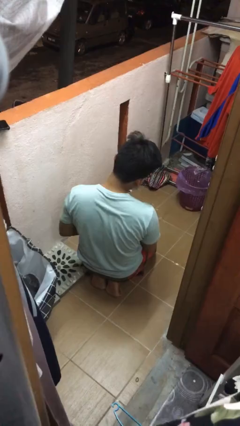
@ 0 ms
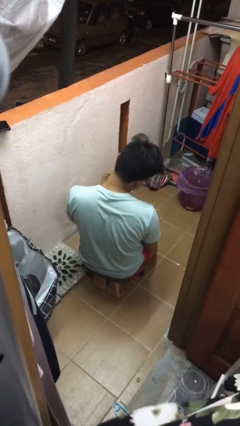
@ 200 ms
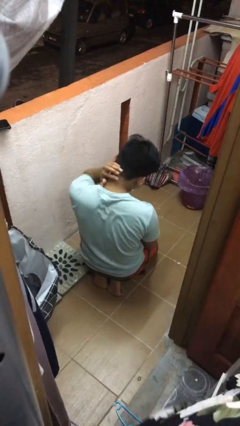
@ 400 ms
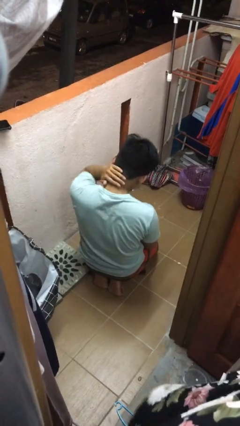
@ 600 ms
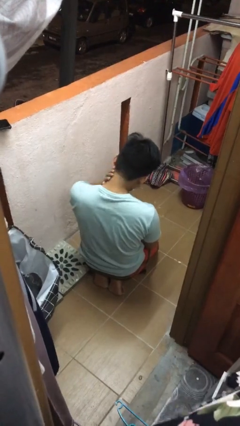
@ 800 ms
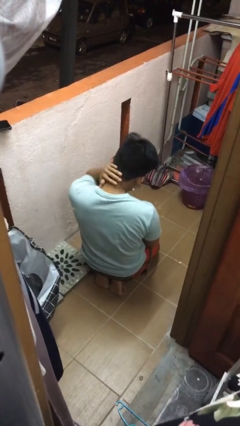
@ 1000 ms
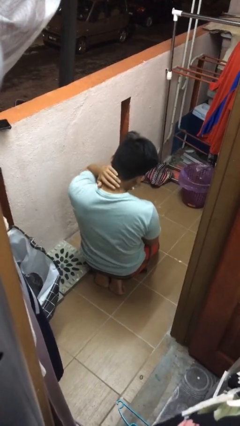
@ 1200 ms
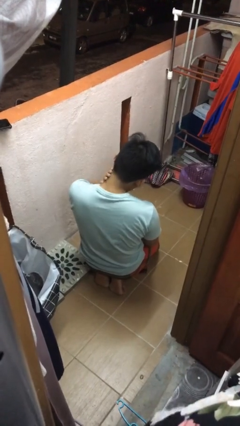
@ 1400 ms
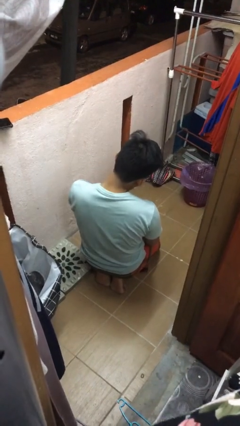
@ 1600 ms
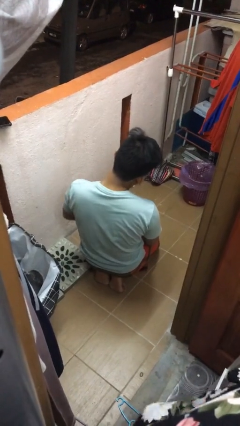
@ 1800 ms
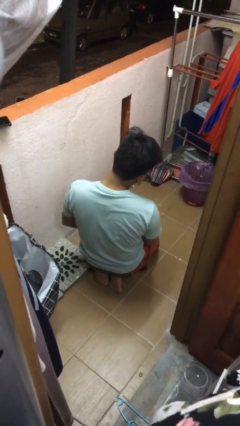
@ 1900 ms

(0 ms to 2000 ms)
person rubs neck

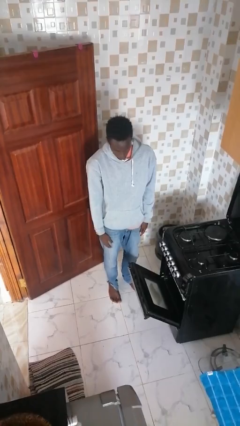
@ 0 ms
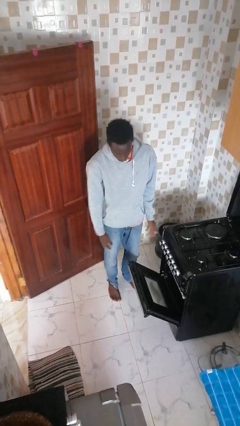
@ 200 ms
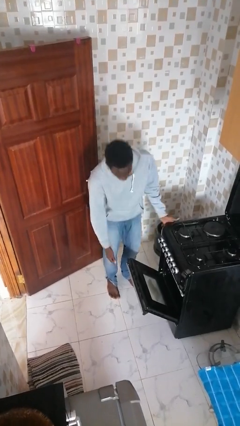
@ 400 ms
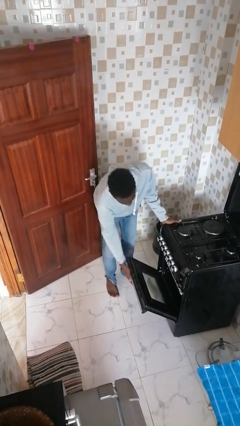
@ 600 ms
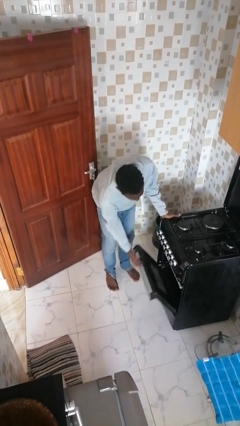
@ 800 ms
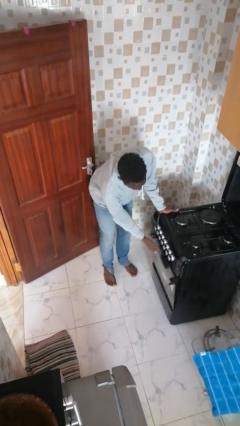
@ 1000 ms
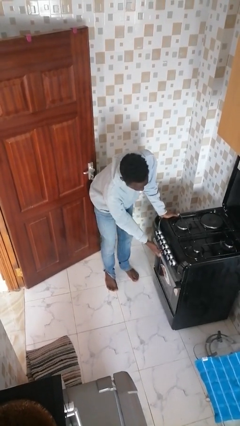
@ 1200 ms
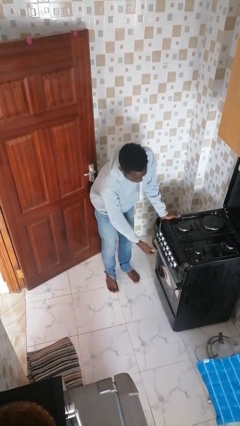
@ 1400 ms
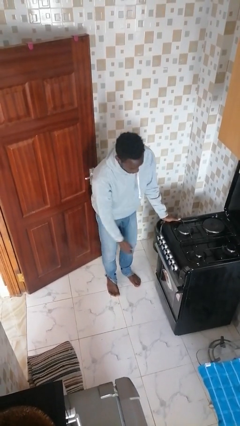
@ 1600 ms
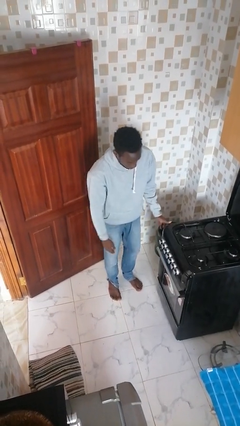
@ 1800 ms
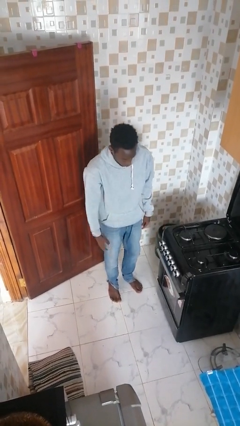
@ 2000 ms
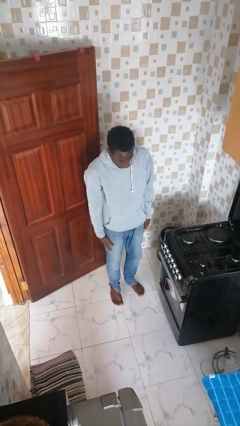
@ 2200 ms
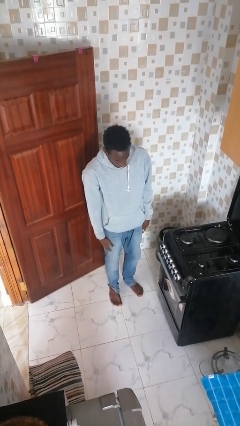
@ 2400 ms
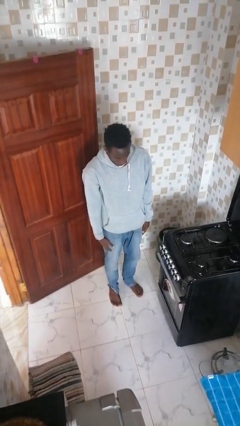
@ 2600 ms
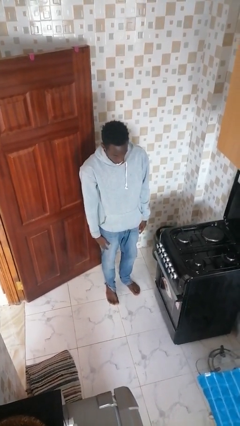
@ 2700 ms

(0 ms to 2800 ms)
person closes oven door

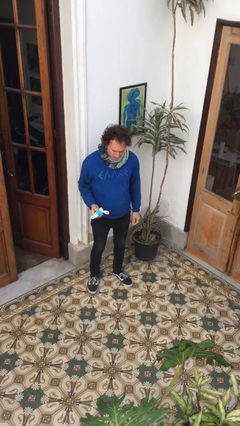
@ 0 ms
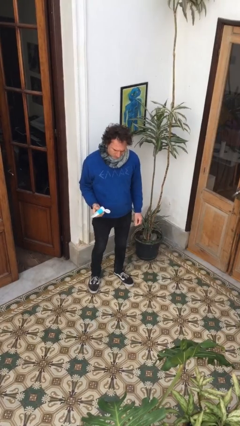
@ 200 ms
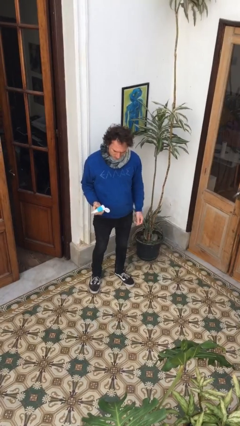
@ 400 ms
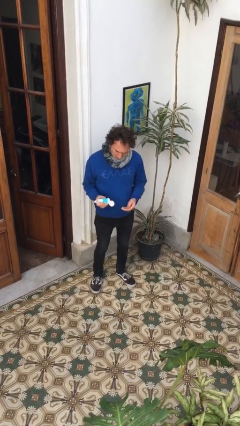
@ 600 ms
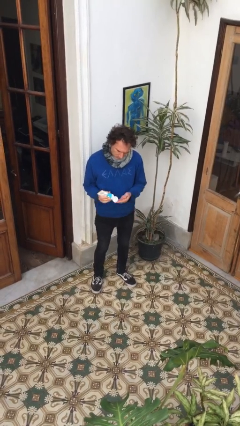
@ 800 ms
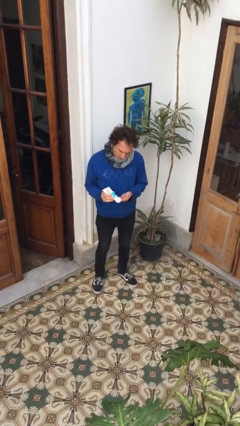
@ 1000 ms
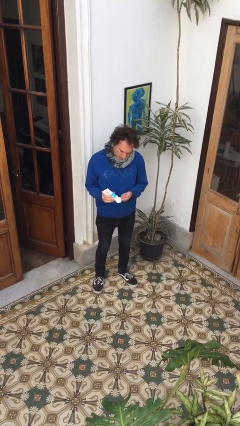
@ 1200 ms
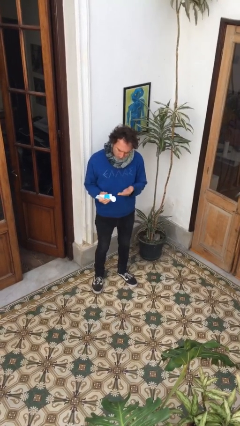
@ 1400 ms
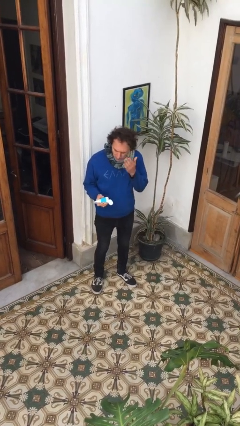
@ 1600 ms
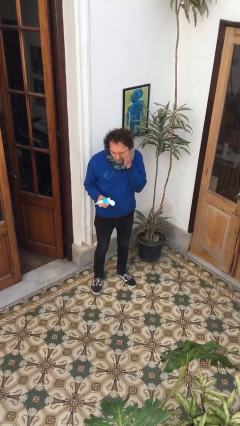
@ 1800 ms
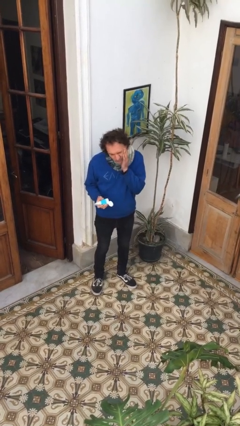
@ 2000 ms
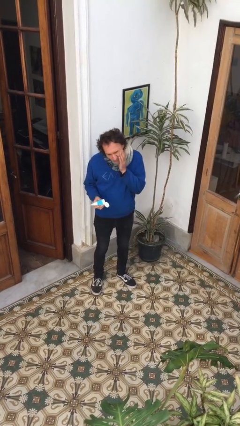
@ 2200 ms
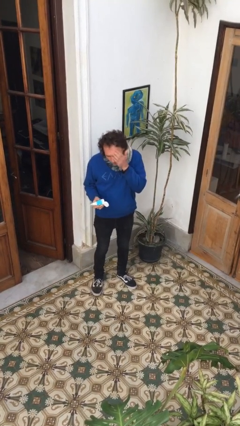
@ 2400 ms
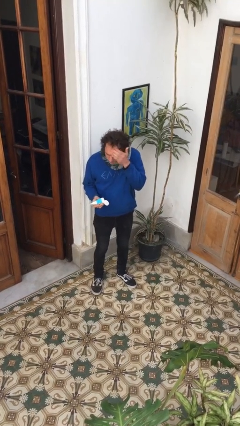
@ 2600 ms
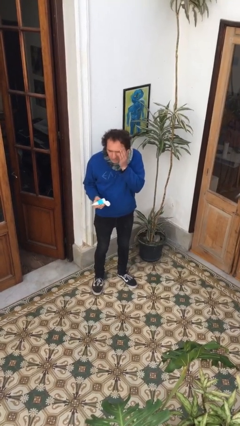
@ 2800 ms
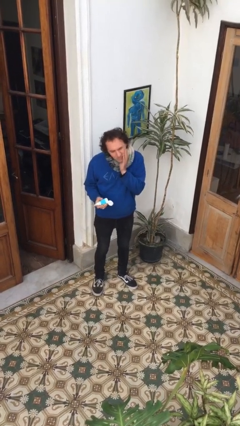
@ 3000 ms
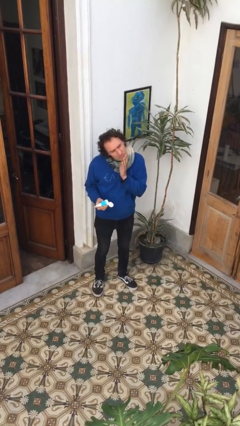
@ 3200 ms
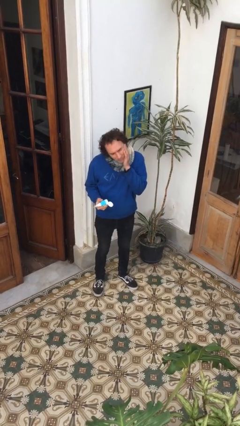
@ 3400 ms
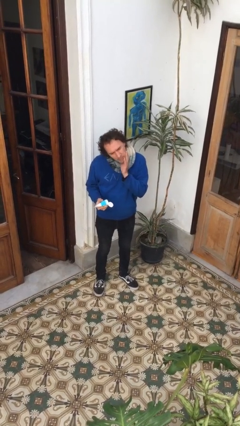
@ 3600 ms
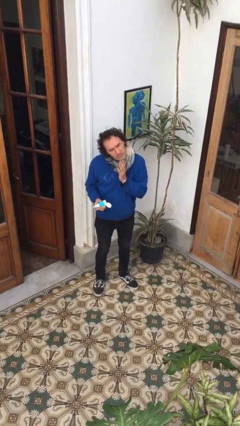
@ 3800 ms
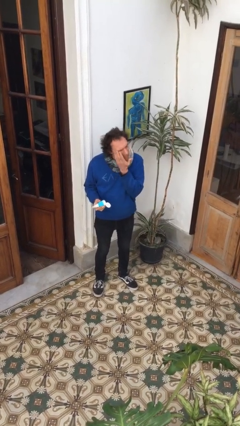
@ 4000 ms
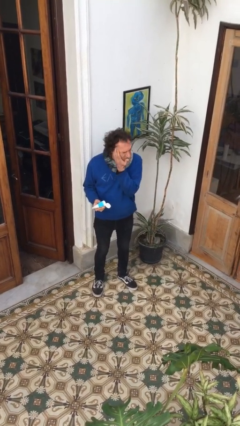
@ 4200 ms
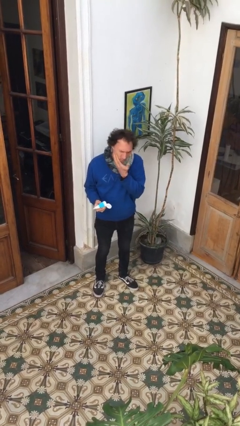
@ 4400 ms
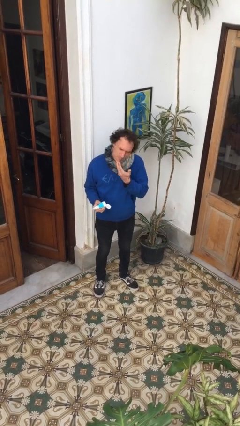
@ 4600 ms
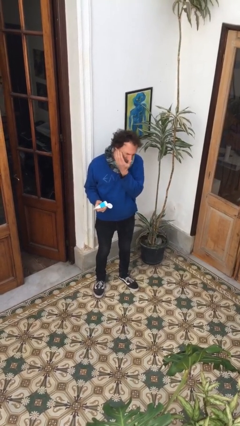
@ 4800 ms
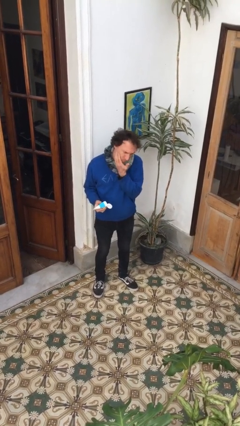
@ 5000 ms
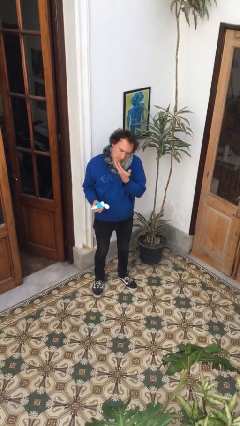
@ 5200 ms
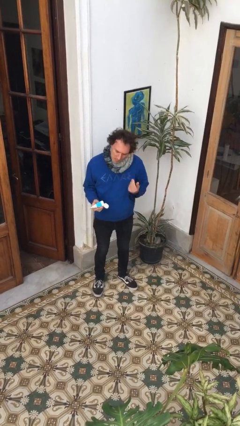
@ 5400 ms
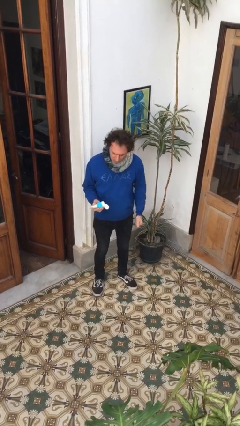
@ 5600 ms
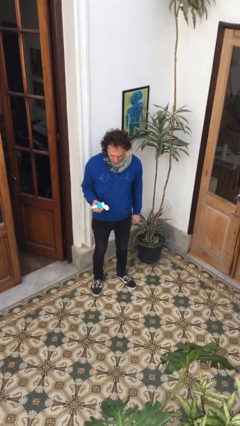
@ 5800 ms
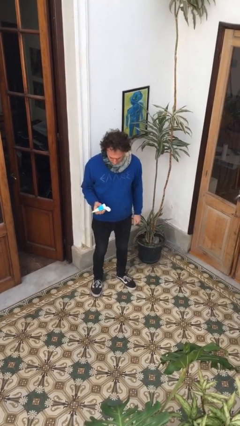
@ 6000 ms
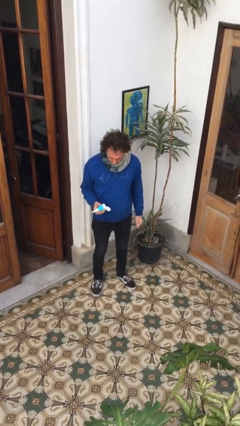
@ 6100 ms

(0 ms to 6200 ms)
person applies facial moisturizer

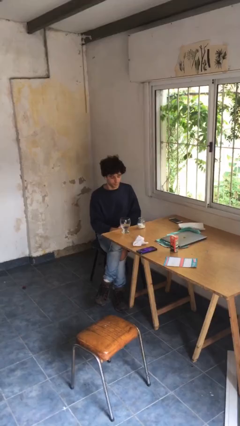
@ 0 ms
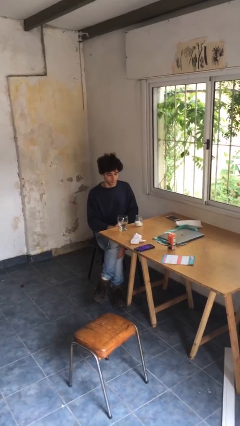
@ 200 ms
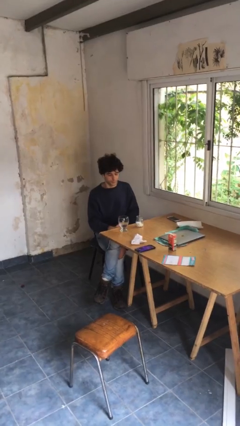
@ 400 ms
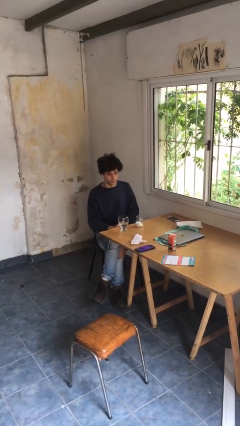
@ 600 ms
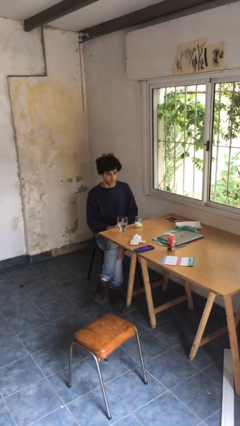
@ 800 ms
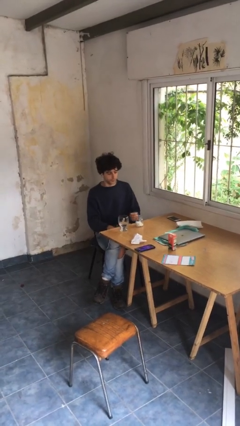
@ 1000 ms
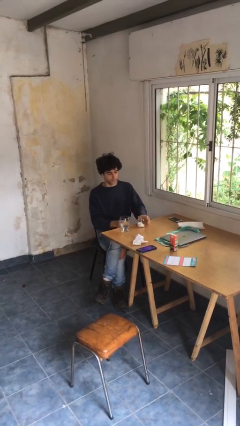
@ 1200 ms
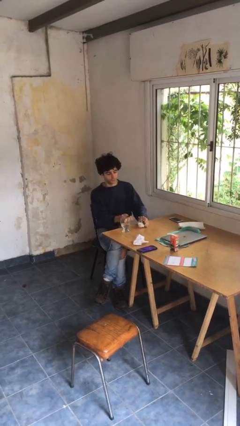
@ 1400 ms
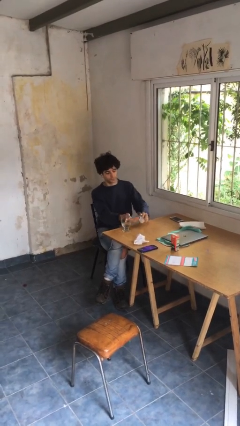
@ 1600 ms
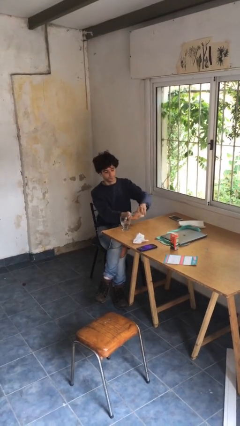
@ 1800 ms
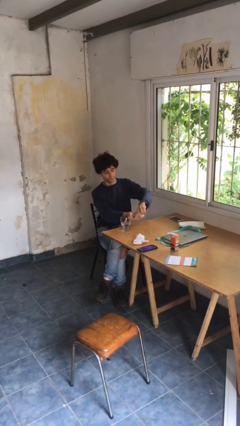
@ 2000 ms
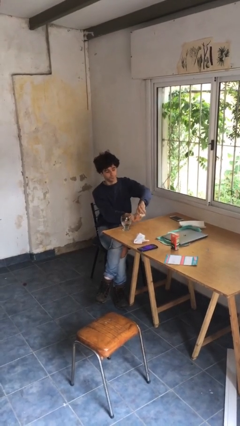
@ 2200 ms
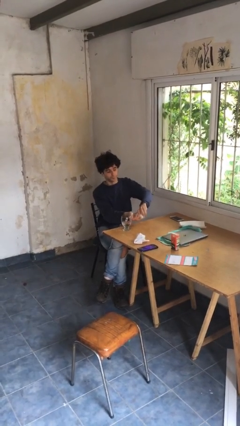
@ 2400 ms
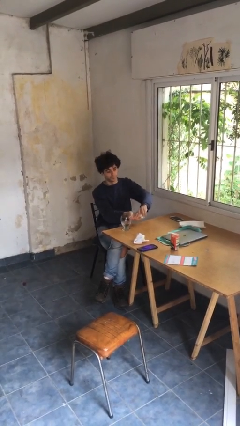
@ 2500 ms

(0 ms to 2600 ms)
person takes medicine pills

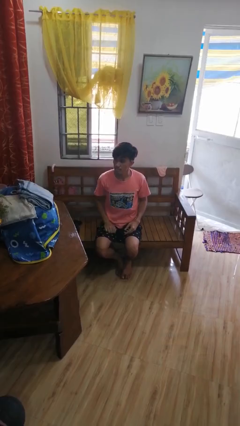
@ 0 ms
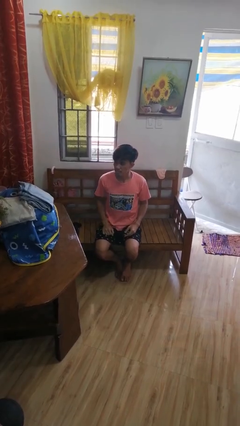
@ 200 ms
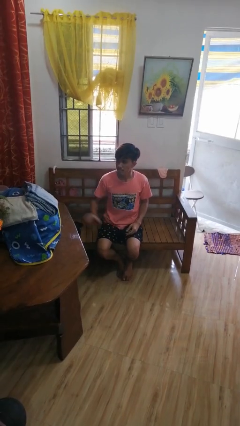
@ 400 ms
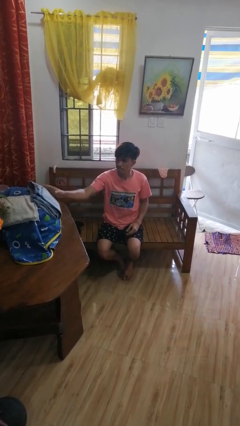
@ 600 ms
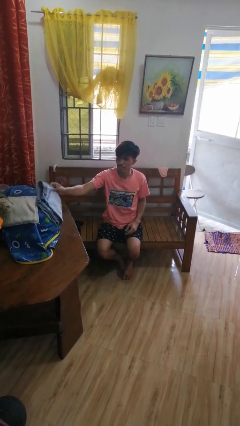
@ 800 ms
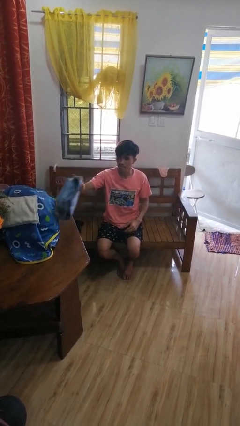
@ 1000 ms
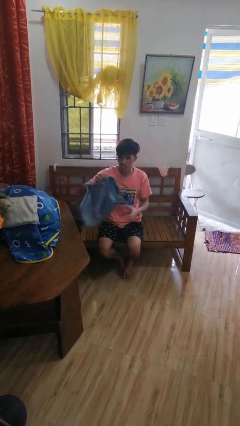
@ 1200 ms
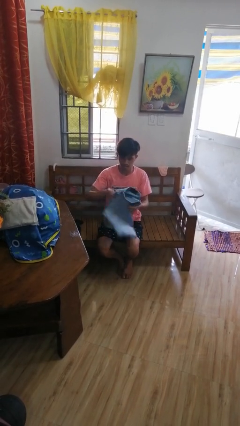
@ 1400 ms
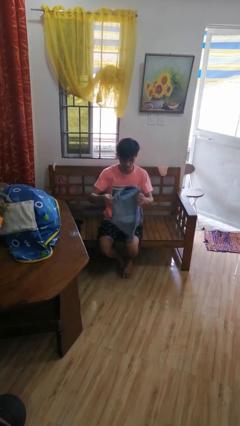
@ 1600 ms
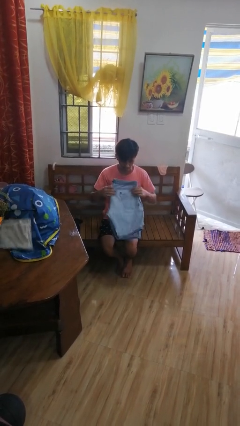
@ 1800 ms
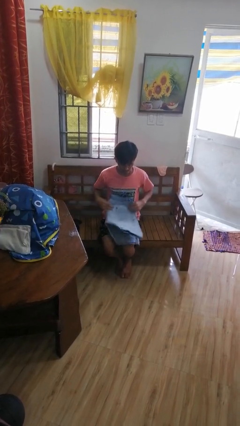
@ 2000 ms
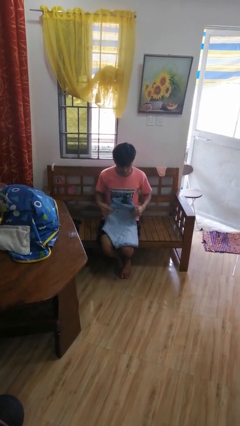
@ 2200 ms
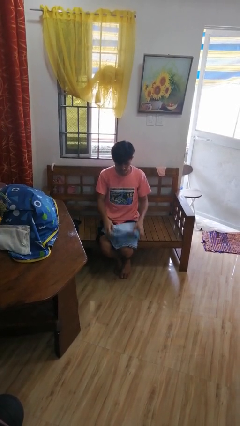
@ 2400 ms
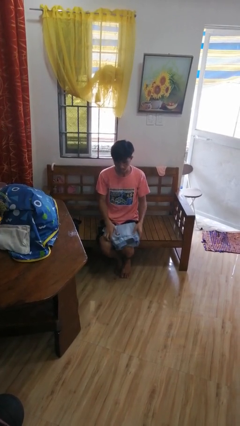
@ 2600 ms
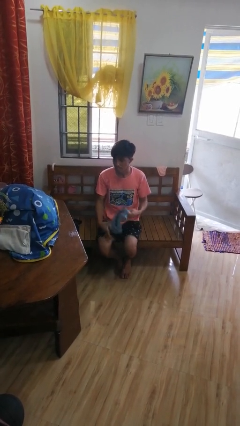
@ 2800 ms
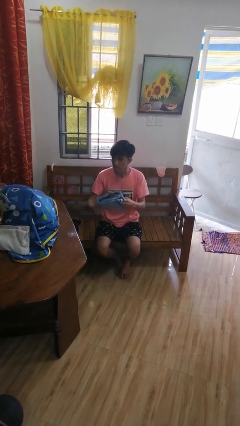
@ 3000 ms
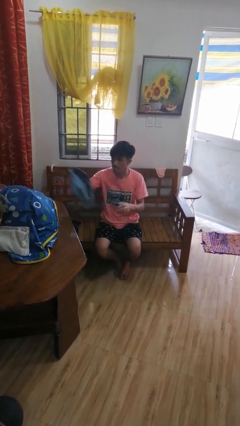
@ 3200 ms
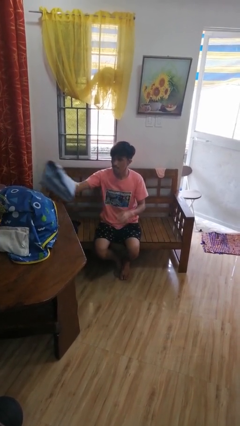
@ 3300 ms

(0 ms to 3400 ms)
person folds pants
